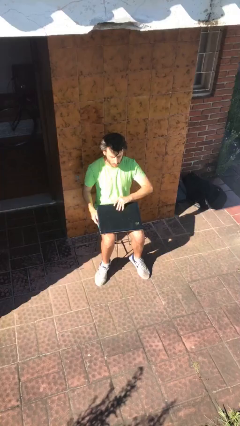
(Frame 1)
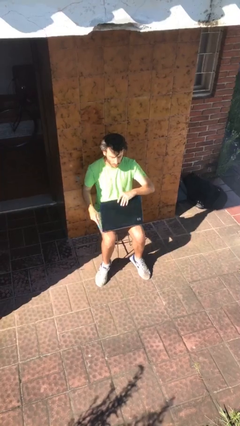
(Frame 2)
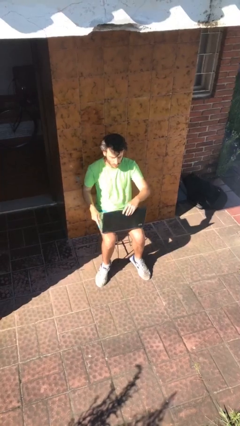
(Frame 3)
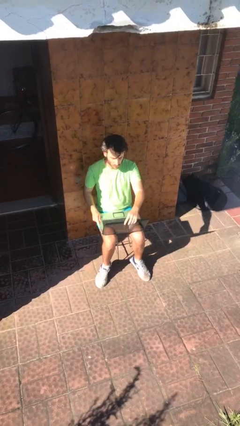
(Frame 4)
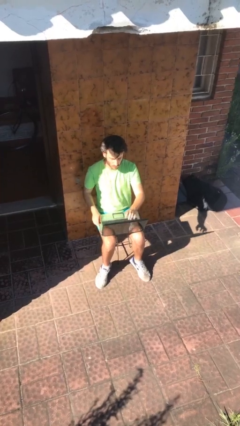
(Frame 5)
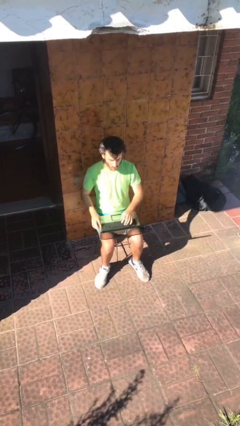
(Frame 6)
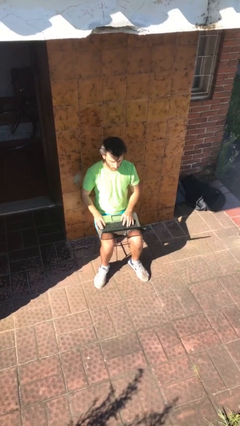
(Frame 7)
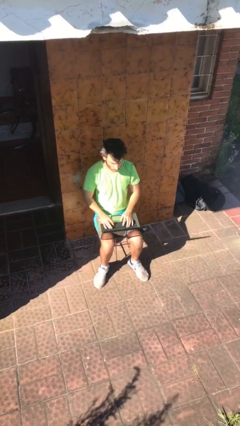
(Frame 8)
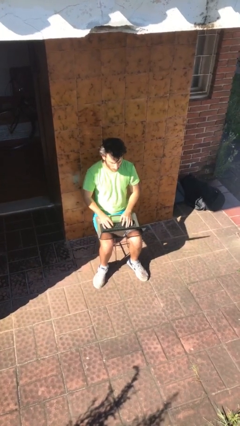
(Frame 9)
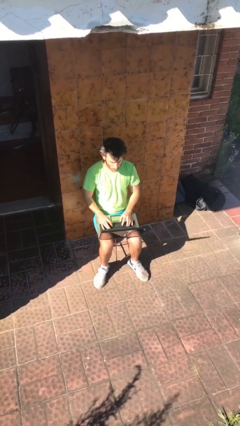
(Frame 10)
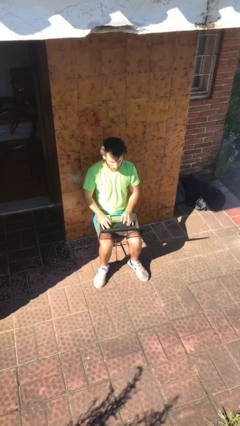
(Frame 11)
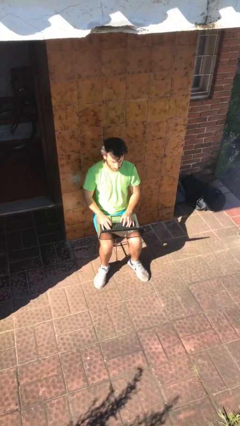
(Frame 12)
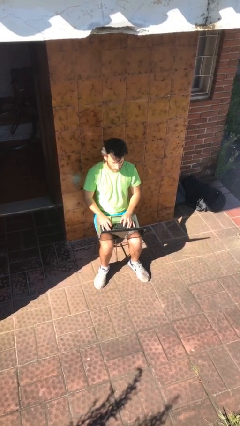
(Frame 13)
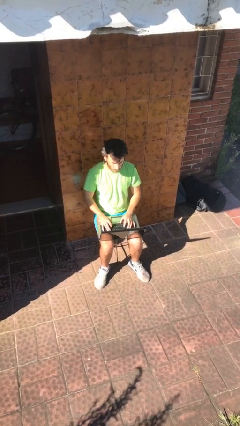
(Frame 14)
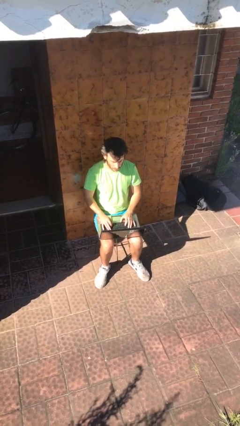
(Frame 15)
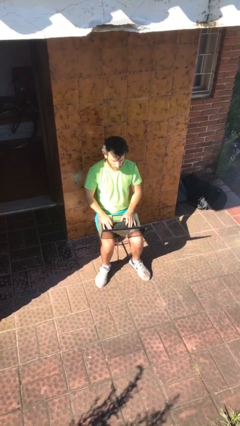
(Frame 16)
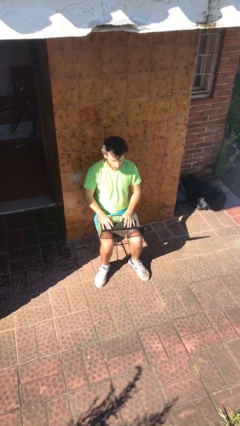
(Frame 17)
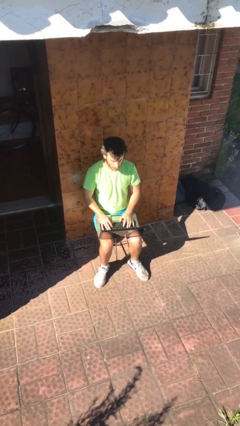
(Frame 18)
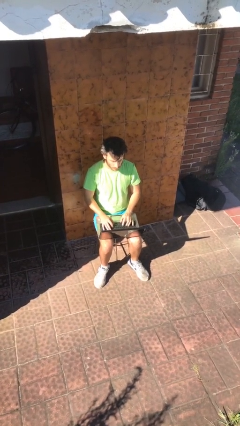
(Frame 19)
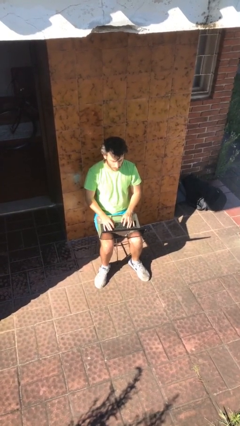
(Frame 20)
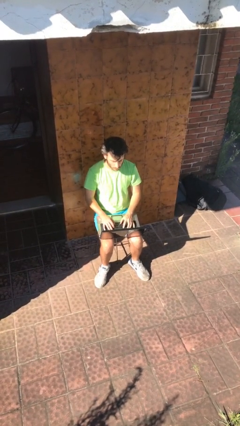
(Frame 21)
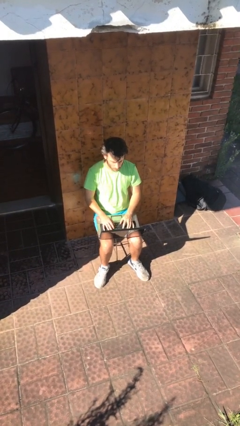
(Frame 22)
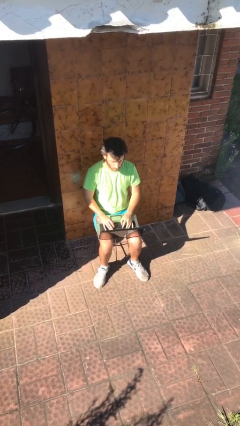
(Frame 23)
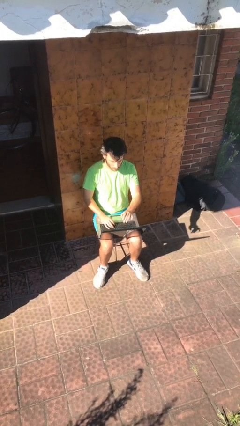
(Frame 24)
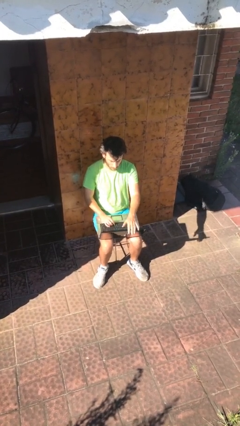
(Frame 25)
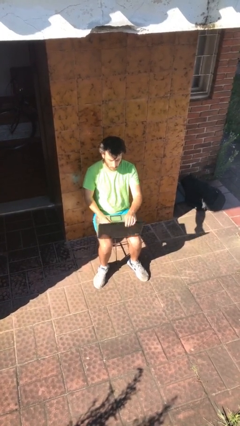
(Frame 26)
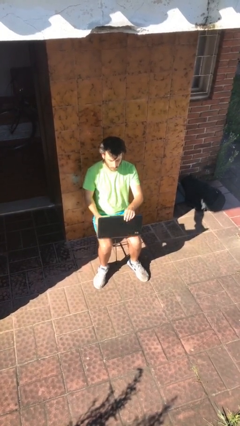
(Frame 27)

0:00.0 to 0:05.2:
person interacts with laptop

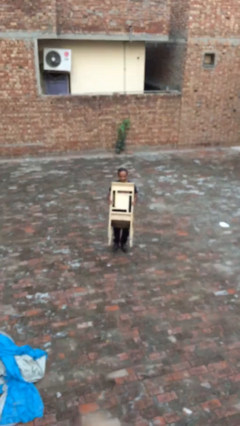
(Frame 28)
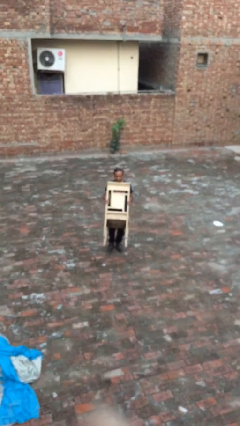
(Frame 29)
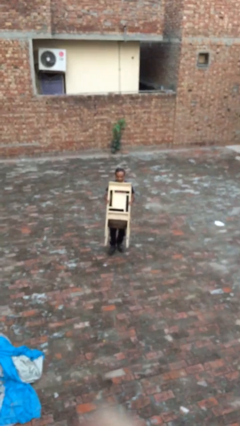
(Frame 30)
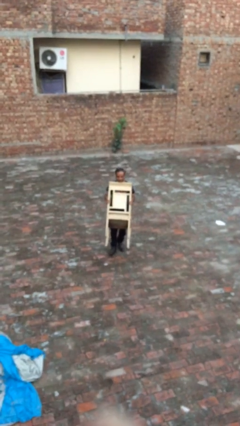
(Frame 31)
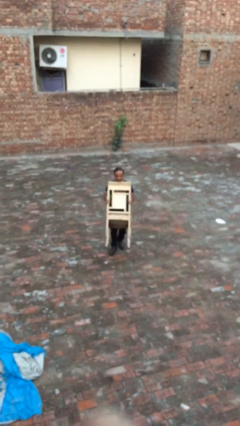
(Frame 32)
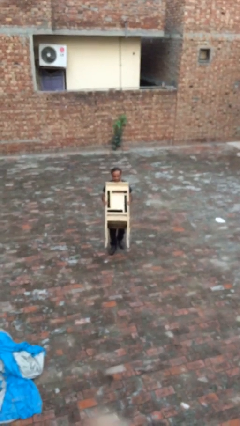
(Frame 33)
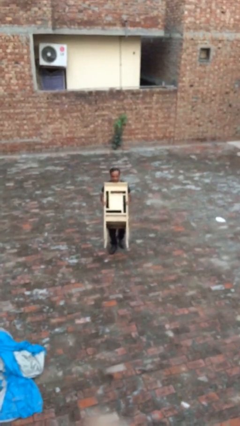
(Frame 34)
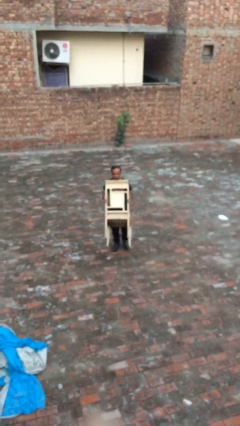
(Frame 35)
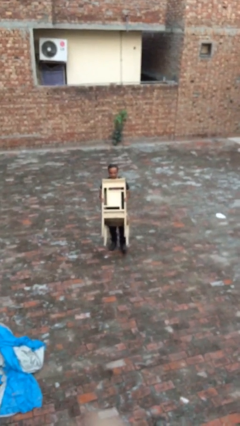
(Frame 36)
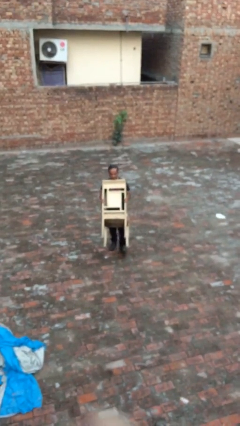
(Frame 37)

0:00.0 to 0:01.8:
person carries heavy object

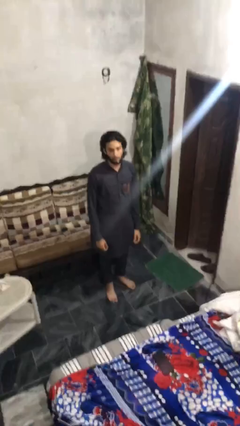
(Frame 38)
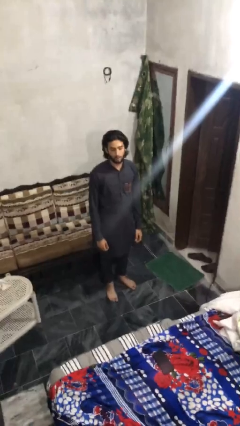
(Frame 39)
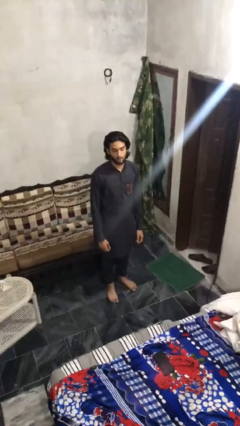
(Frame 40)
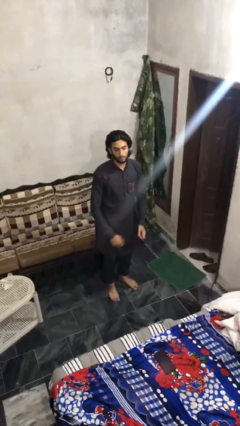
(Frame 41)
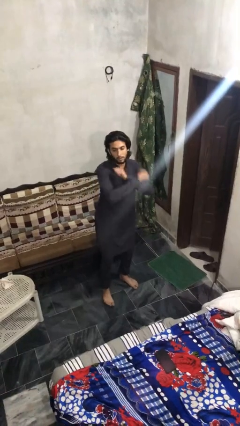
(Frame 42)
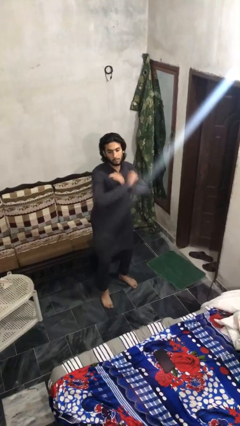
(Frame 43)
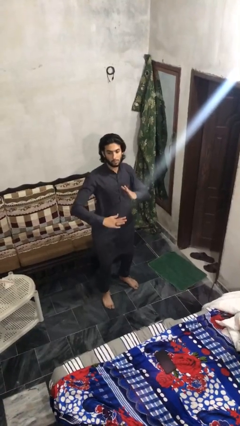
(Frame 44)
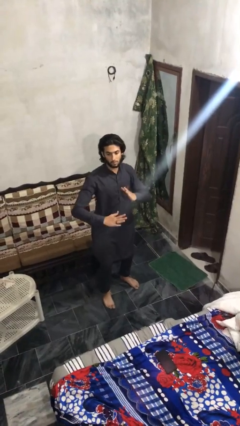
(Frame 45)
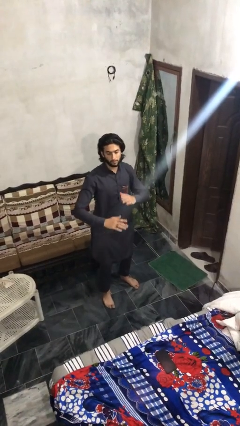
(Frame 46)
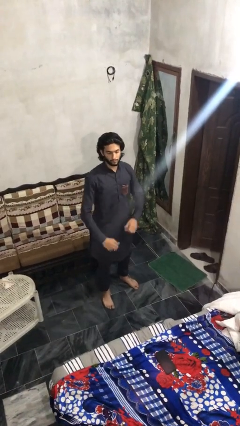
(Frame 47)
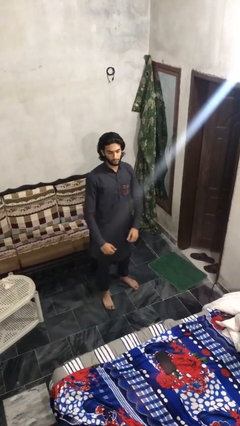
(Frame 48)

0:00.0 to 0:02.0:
person karate chop

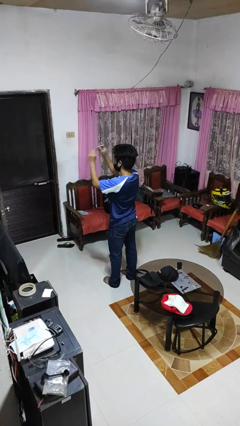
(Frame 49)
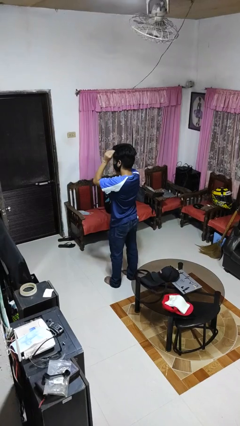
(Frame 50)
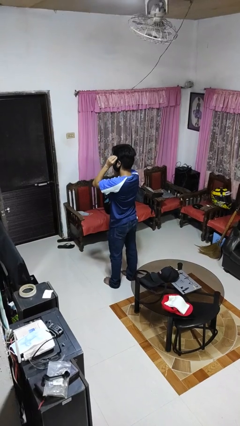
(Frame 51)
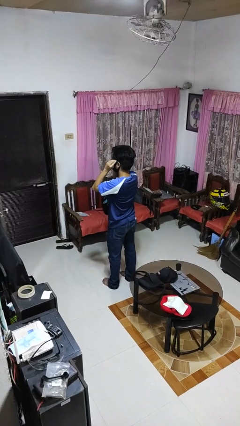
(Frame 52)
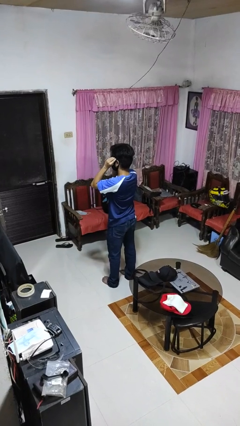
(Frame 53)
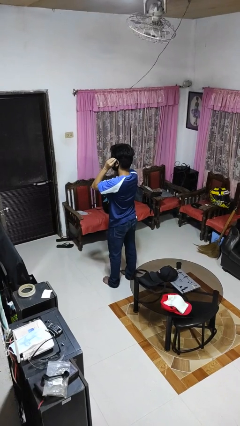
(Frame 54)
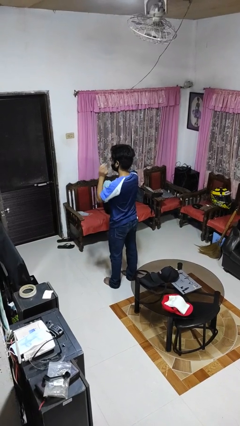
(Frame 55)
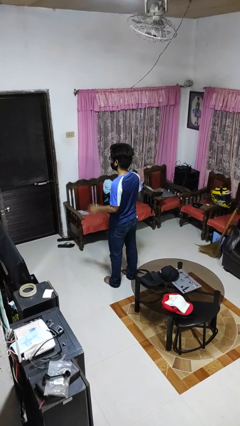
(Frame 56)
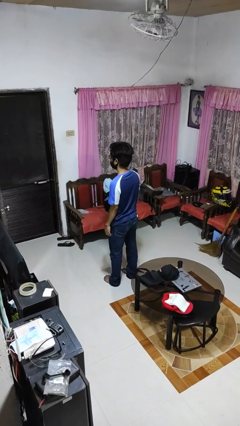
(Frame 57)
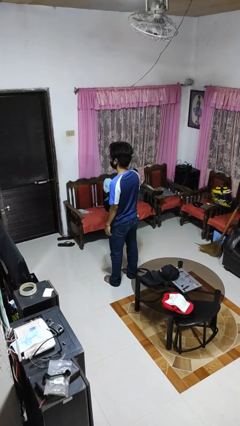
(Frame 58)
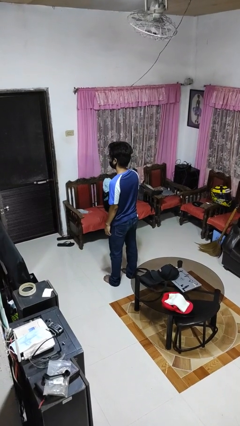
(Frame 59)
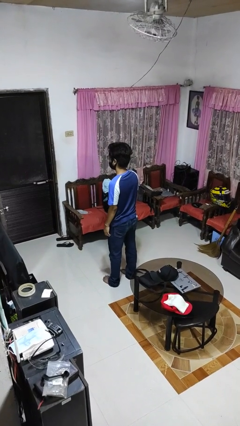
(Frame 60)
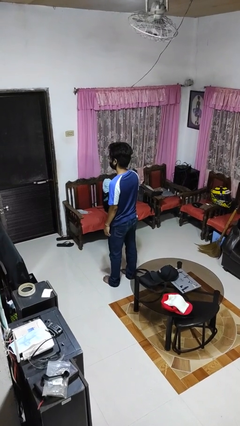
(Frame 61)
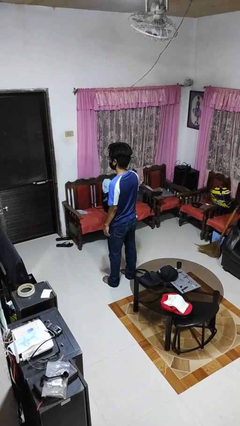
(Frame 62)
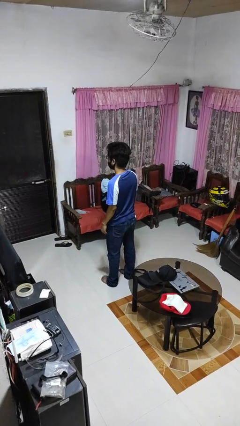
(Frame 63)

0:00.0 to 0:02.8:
person puts on glasses

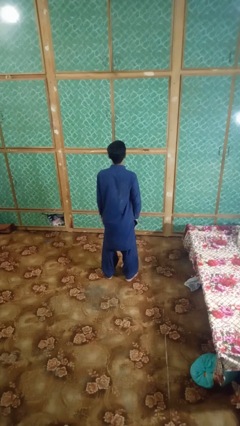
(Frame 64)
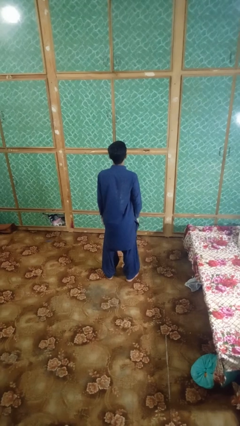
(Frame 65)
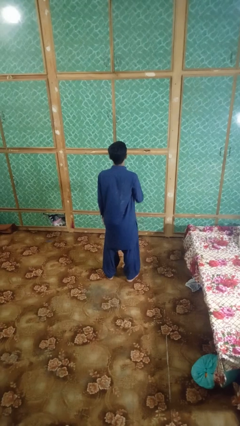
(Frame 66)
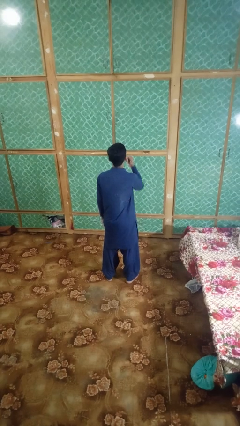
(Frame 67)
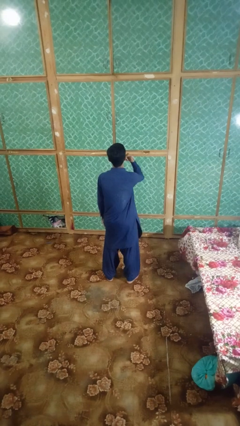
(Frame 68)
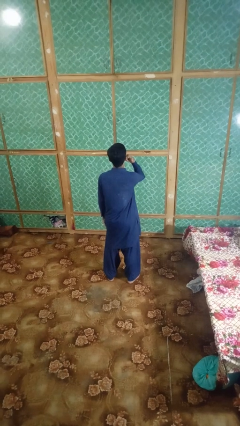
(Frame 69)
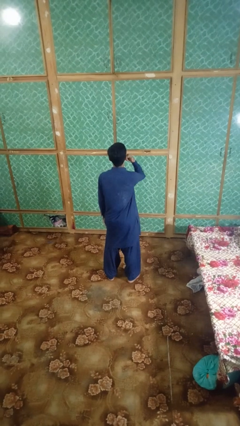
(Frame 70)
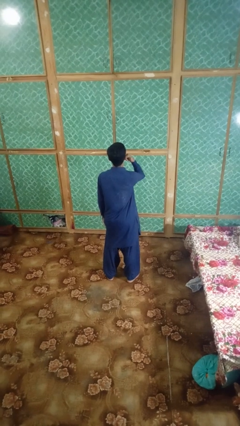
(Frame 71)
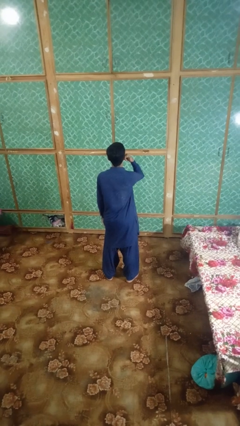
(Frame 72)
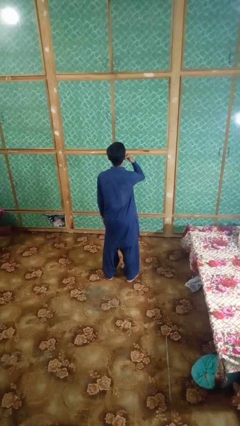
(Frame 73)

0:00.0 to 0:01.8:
person gestures call me

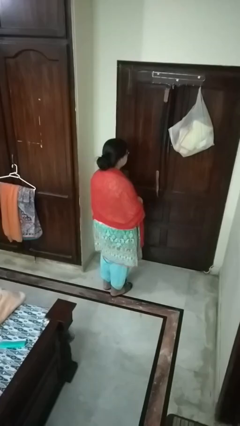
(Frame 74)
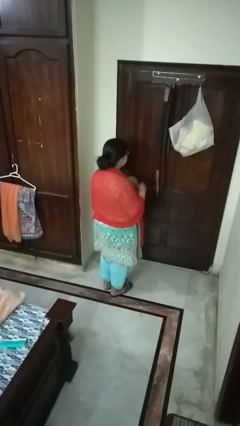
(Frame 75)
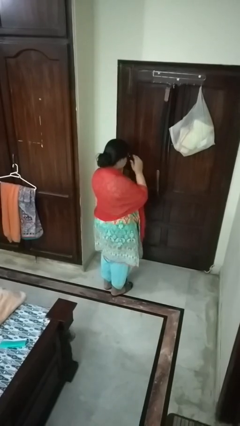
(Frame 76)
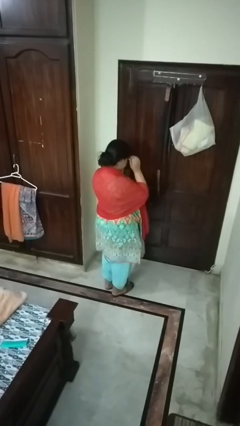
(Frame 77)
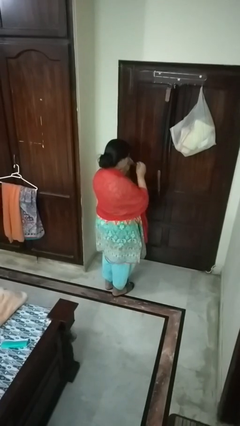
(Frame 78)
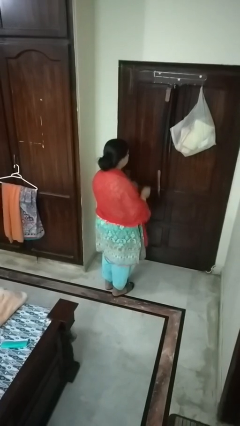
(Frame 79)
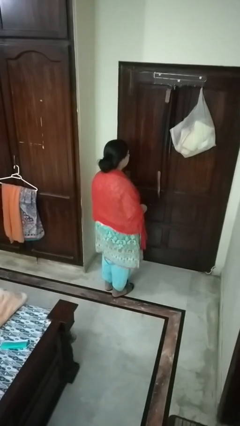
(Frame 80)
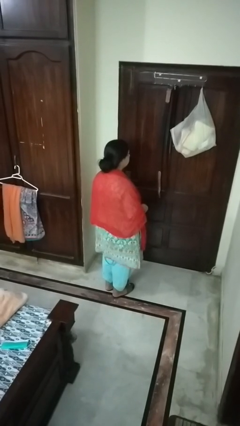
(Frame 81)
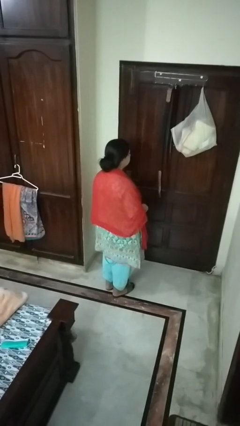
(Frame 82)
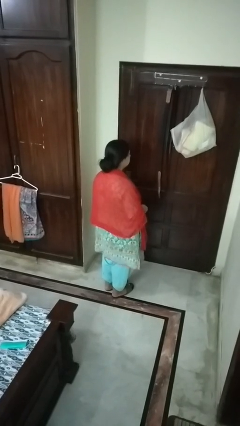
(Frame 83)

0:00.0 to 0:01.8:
person takes off glasses

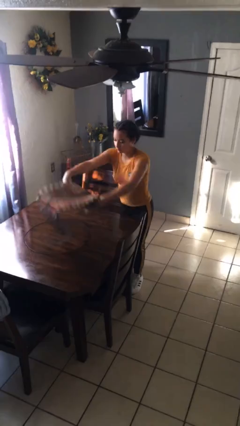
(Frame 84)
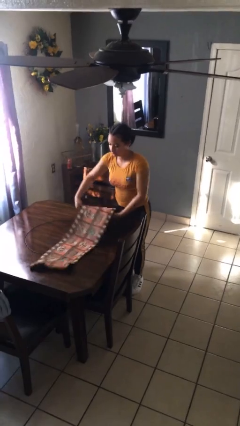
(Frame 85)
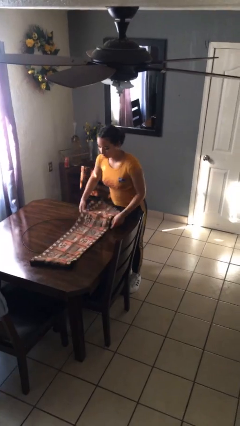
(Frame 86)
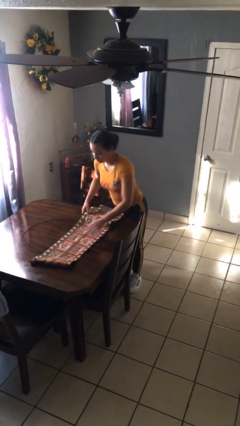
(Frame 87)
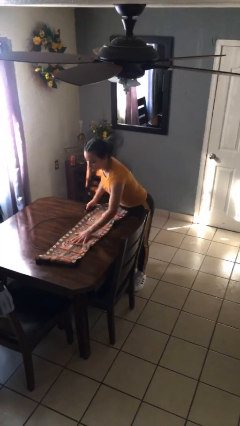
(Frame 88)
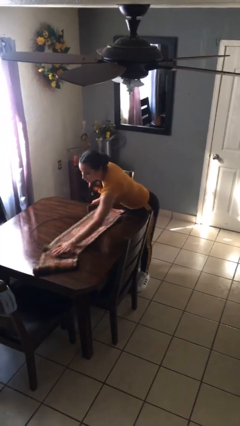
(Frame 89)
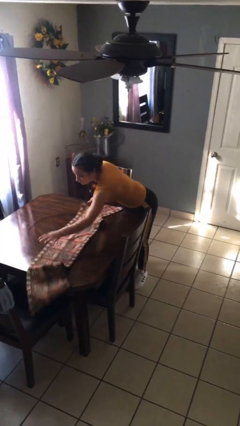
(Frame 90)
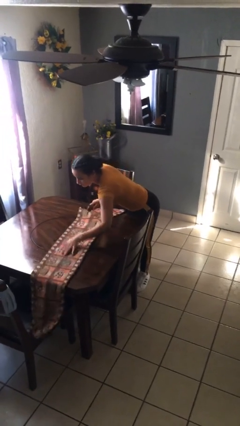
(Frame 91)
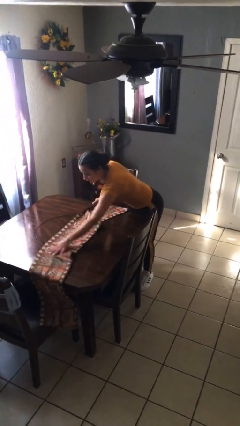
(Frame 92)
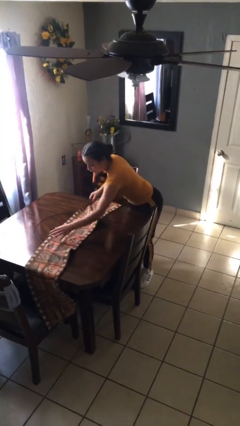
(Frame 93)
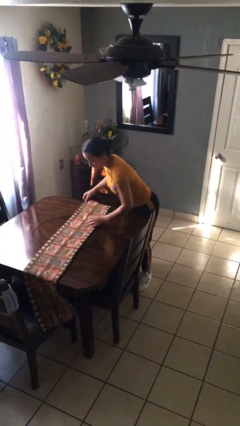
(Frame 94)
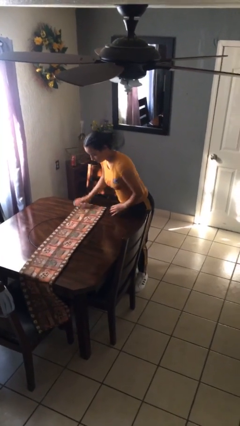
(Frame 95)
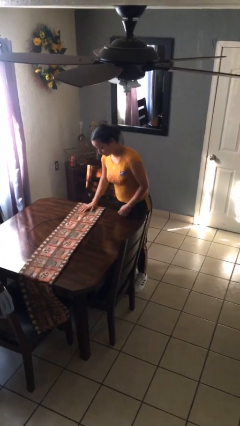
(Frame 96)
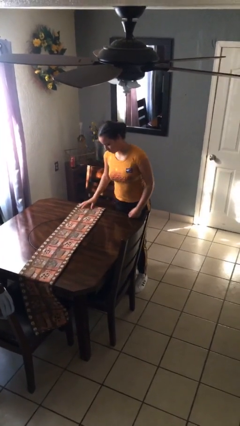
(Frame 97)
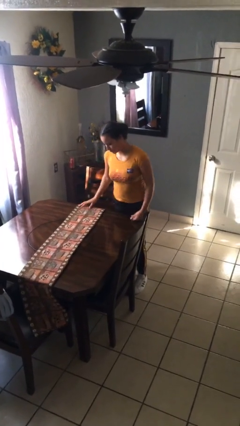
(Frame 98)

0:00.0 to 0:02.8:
person spreads tablecloth
